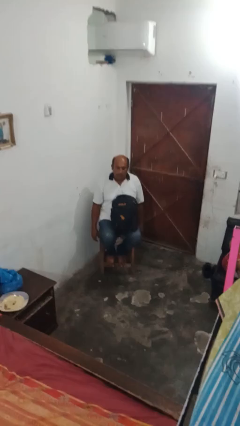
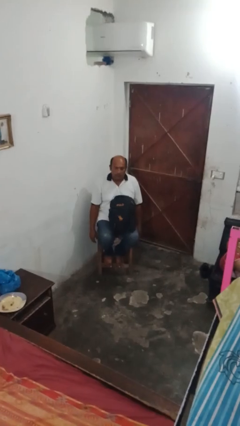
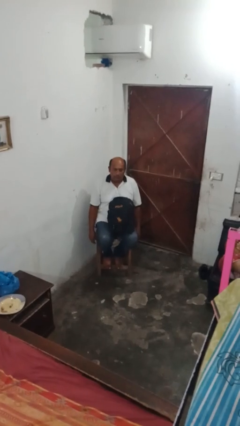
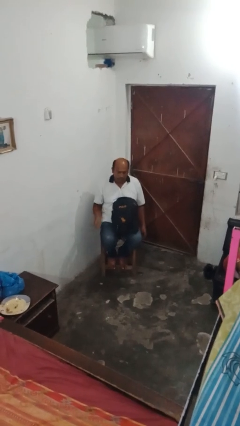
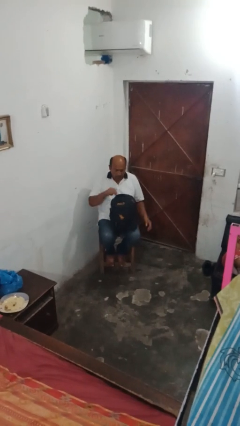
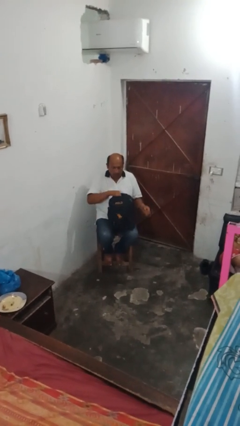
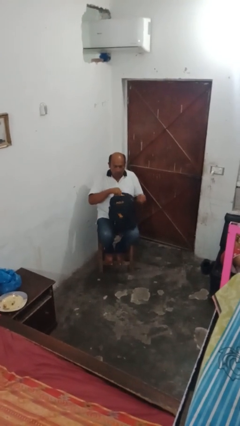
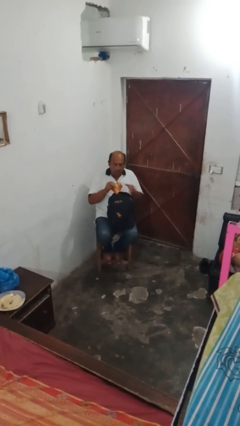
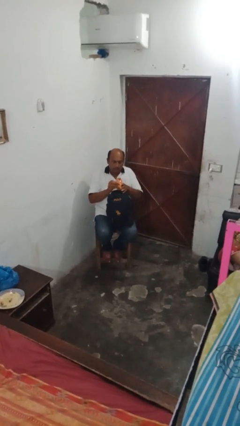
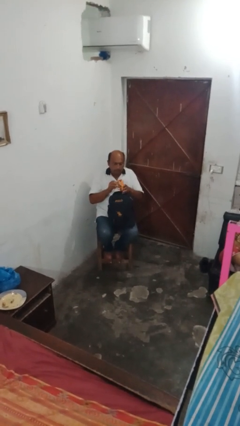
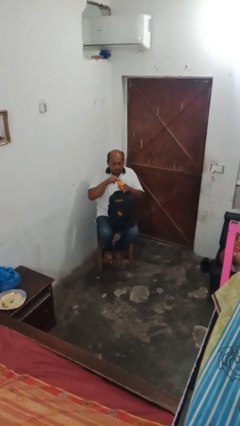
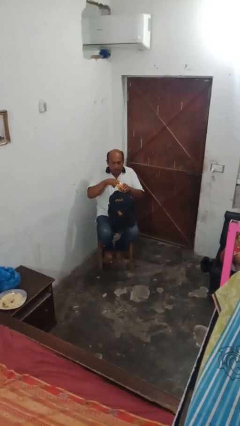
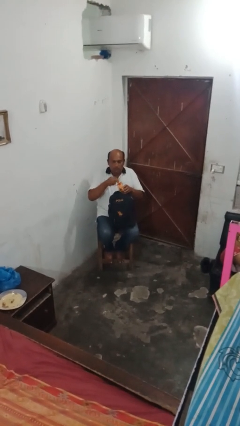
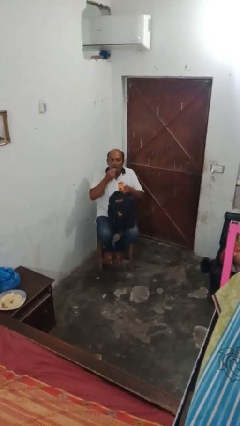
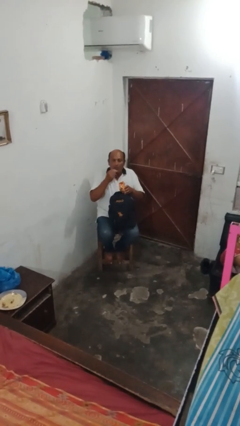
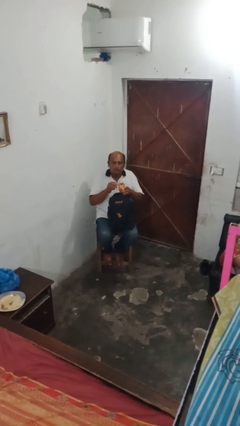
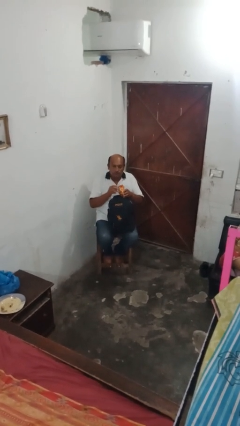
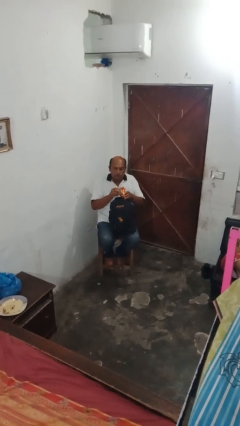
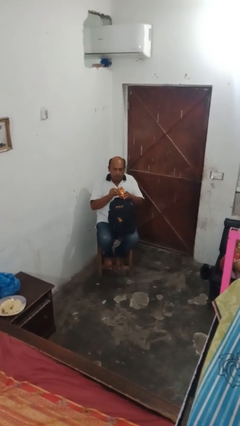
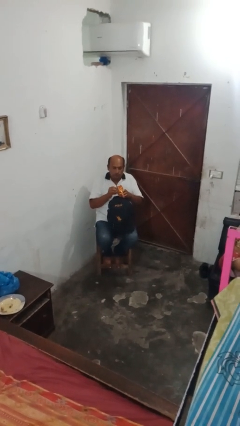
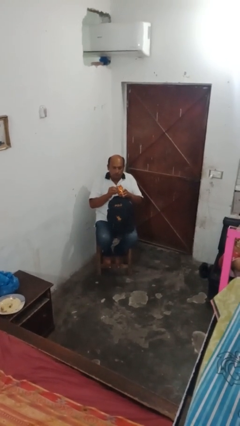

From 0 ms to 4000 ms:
person eats snack from bag

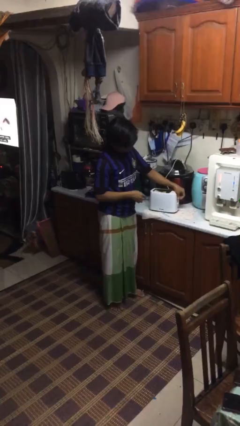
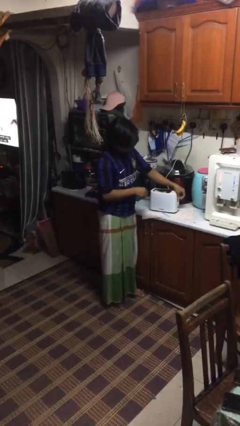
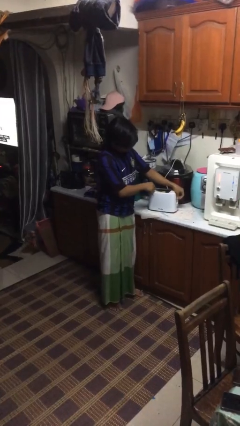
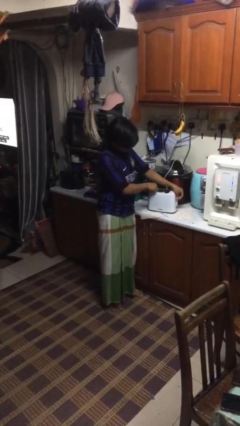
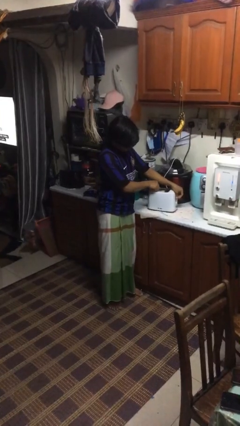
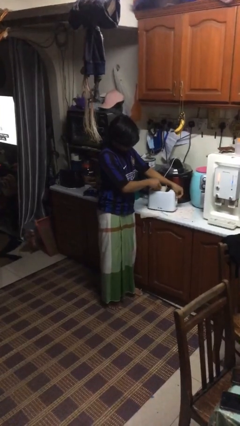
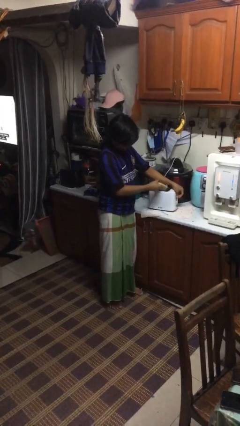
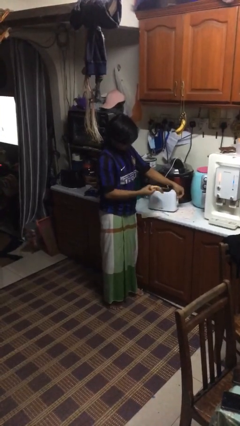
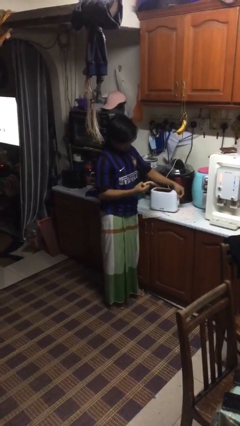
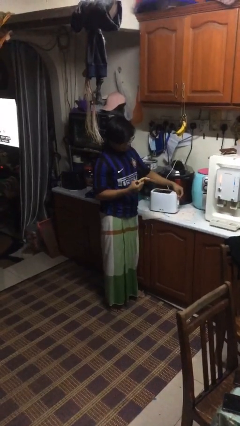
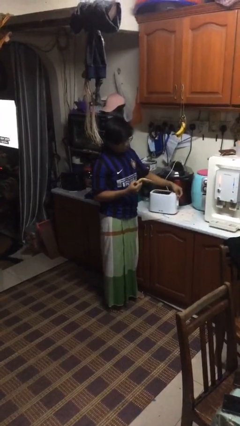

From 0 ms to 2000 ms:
person takes object from toaster

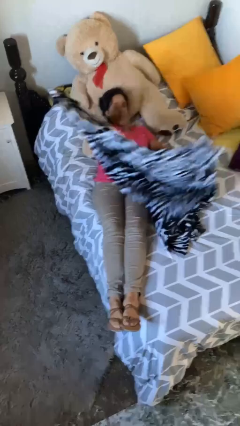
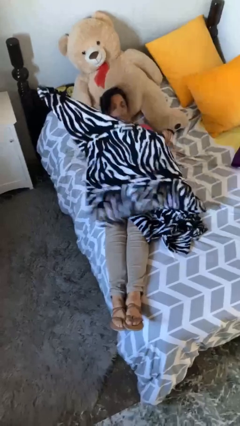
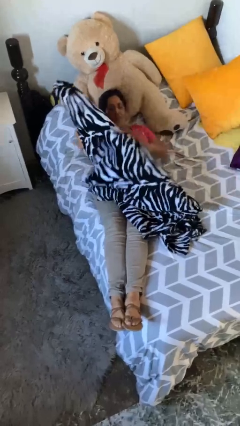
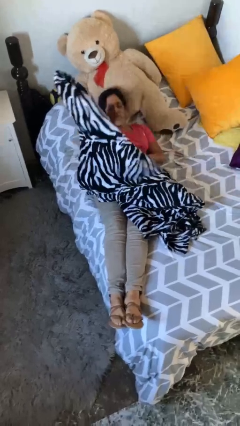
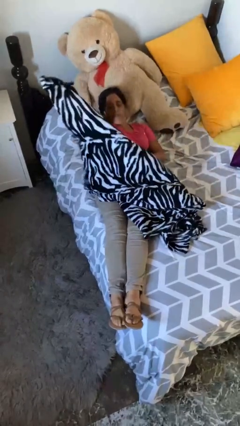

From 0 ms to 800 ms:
person covers with bedsheets

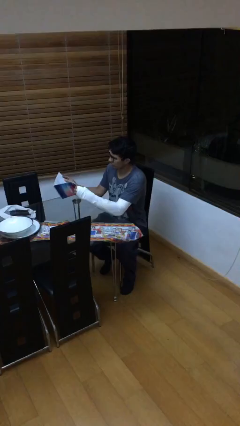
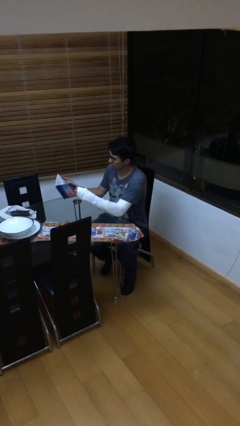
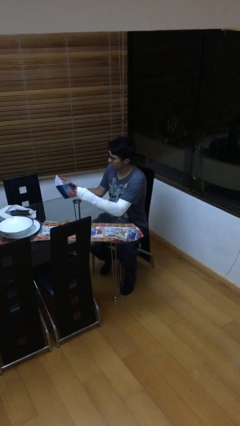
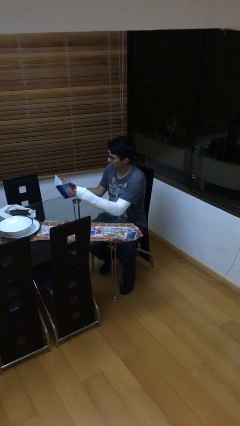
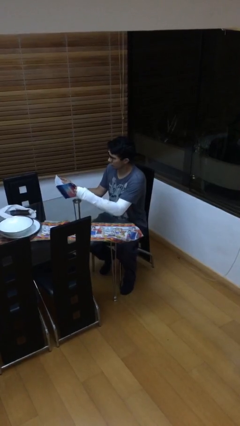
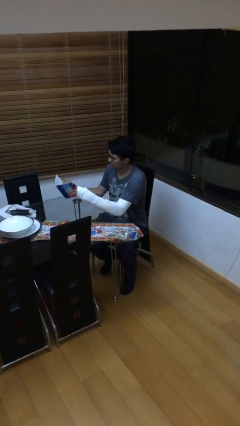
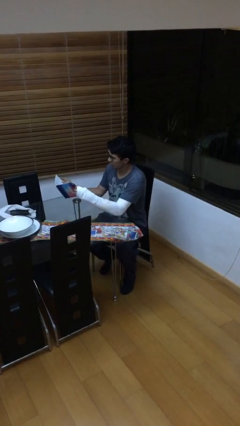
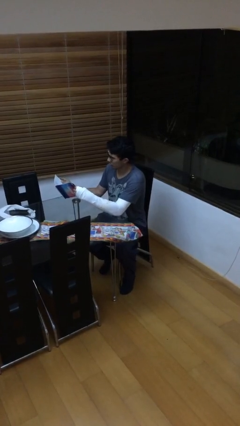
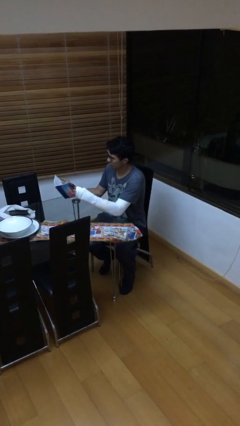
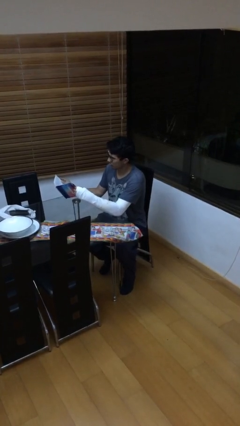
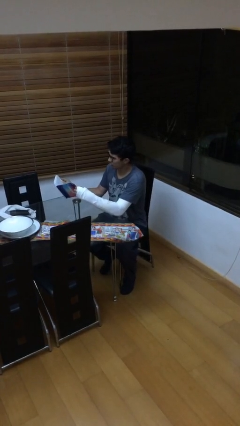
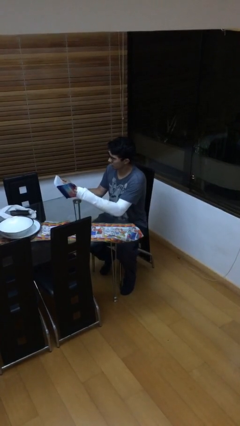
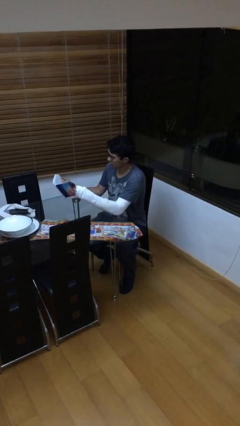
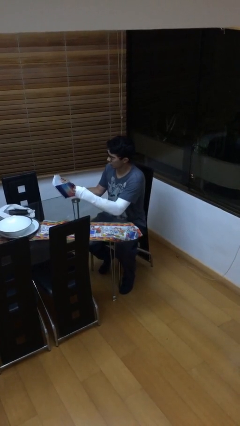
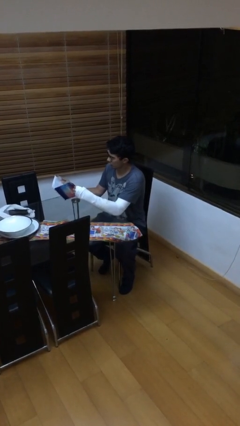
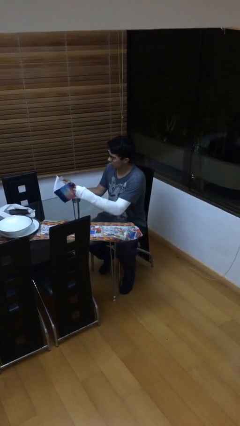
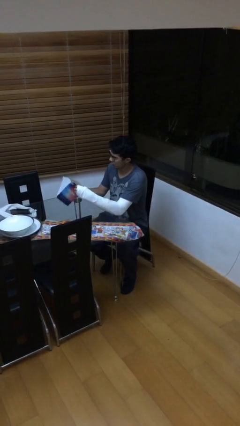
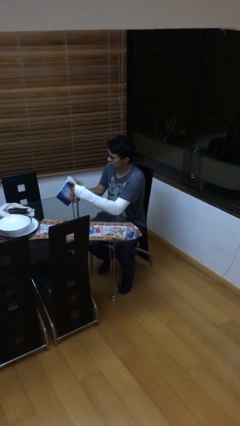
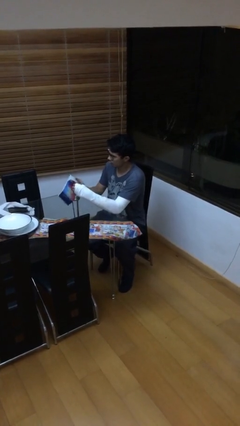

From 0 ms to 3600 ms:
person reads document

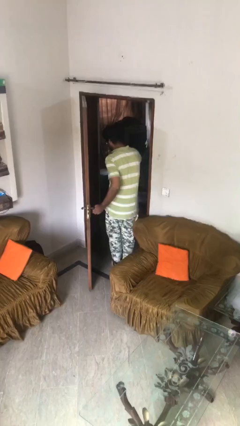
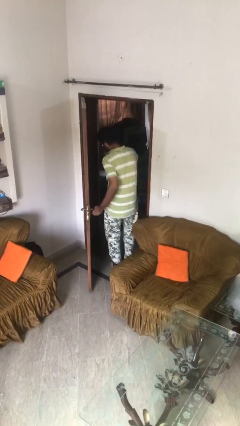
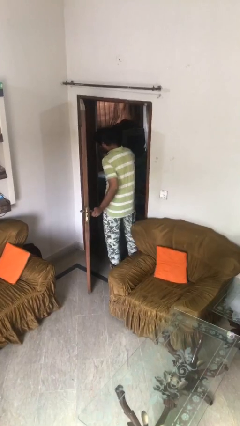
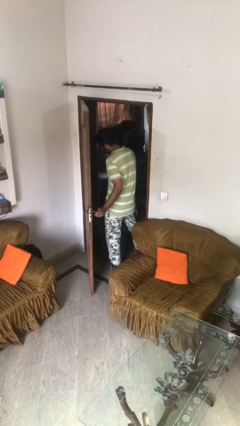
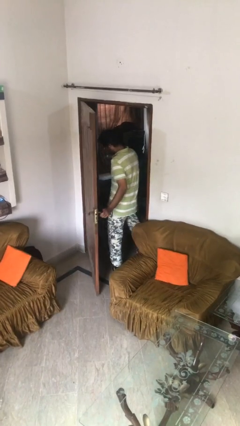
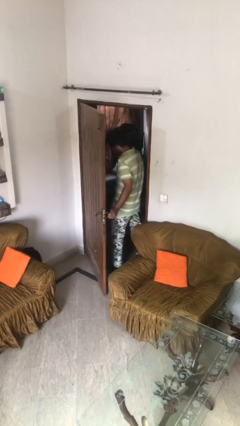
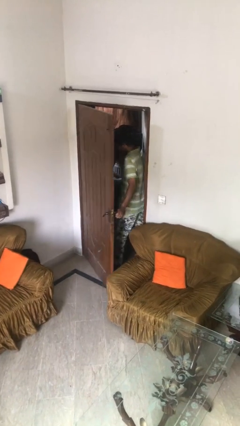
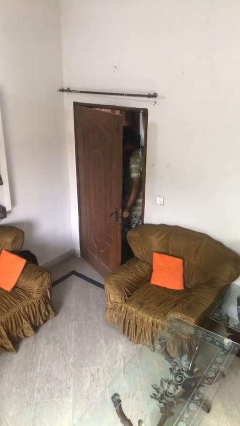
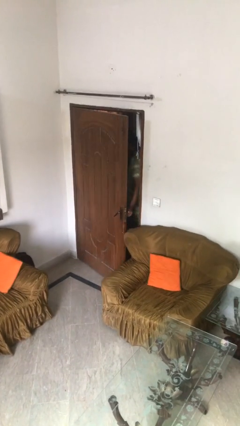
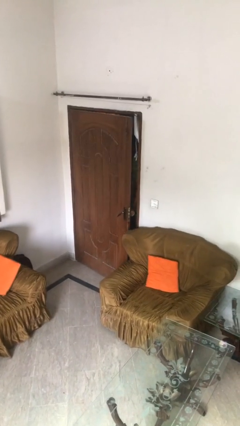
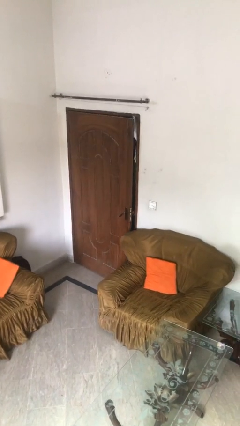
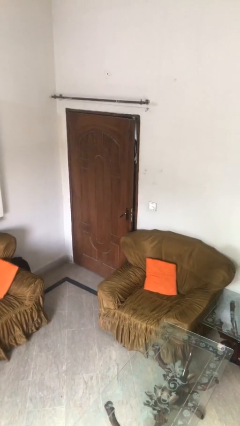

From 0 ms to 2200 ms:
person closes facility door

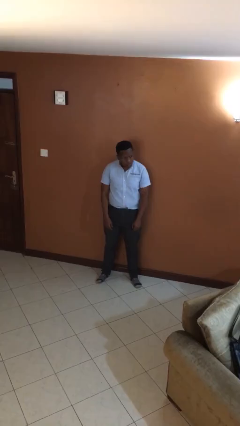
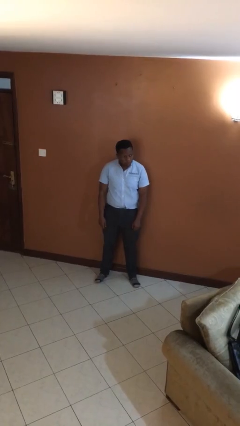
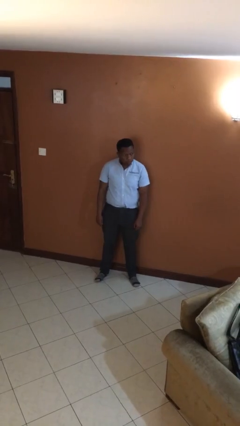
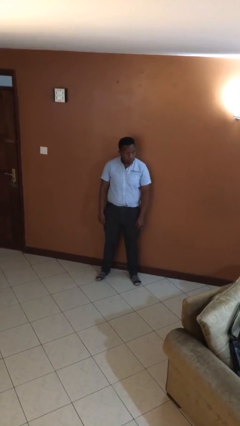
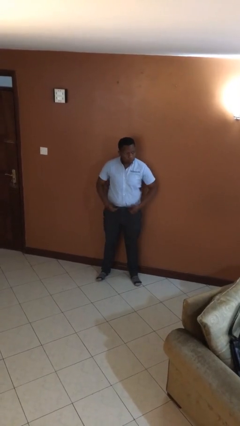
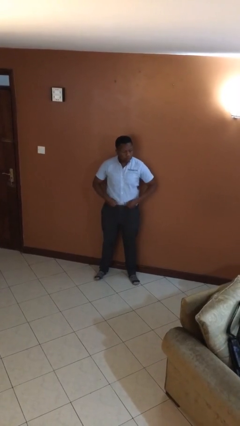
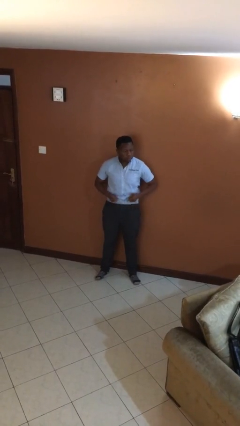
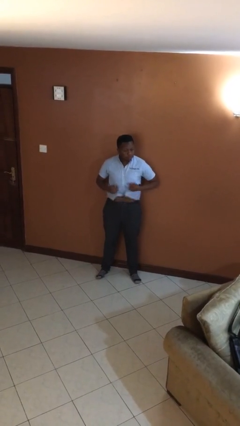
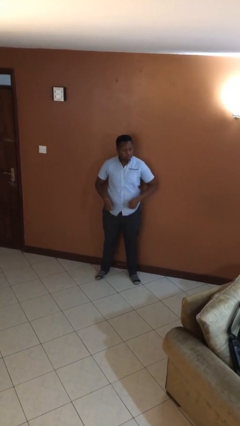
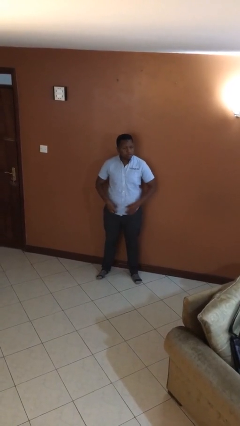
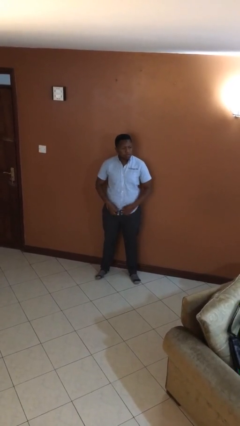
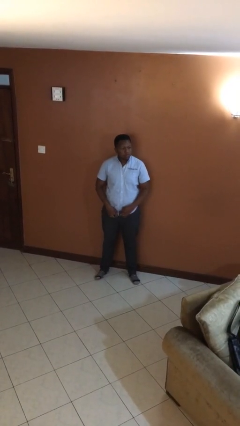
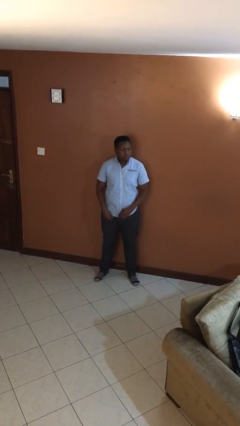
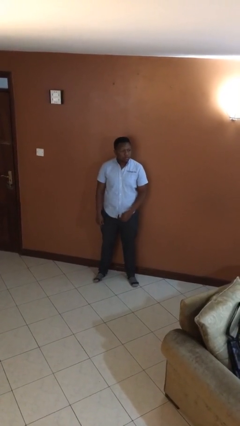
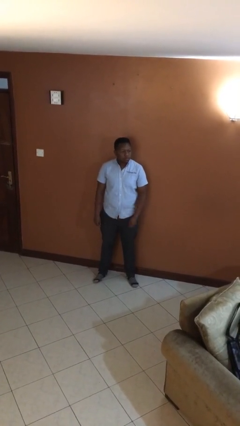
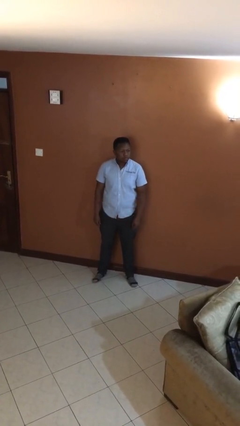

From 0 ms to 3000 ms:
person untucks shirt

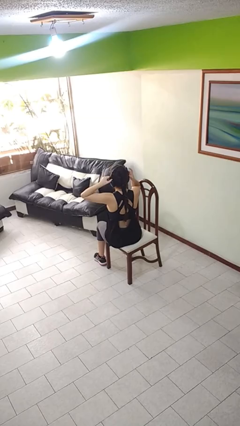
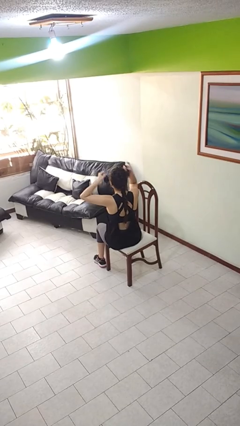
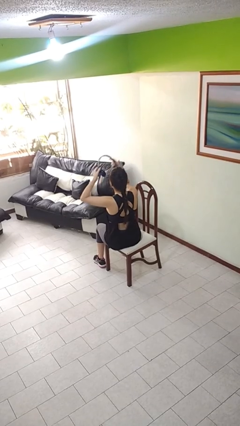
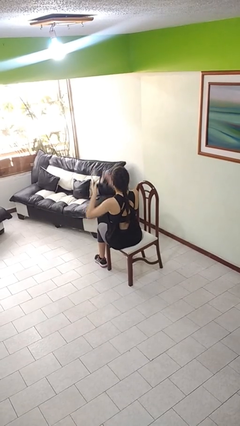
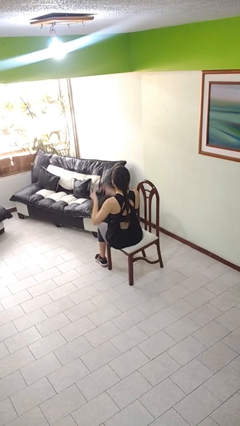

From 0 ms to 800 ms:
person takes off headphones

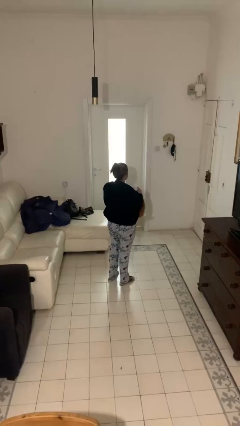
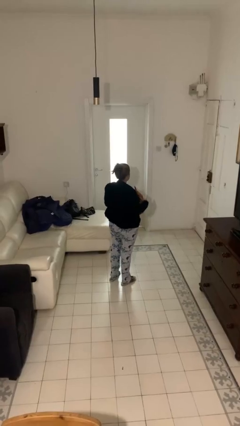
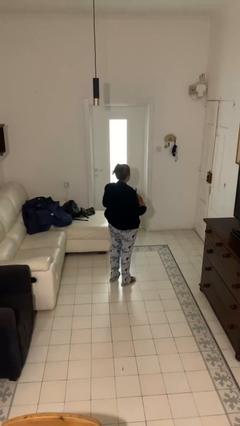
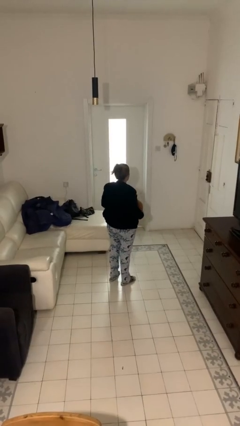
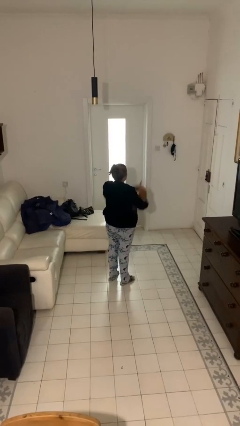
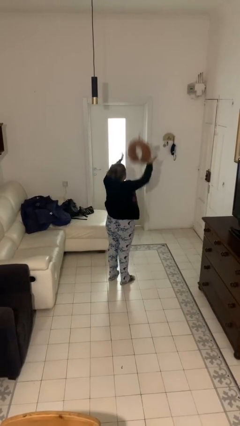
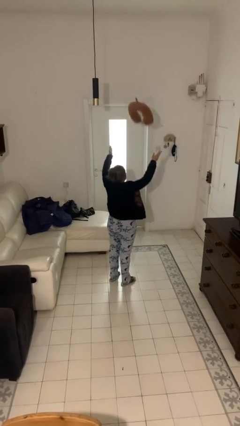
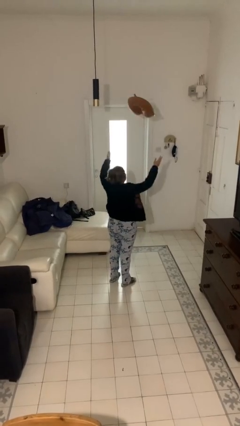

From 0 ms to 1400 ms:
person drops object
